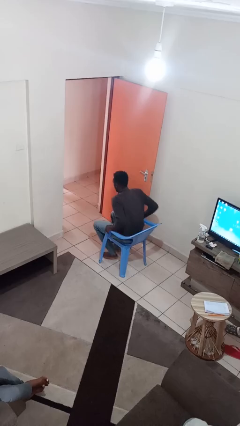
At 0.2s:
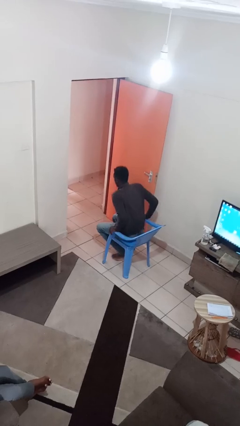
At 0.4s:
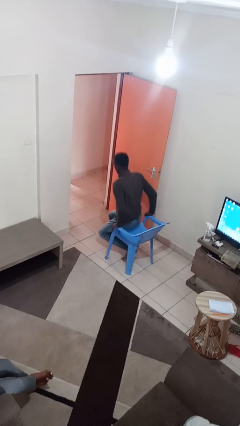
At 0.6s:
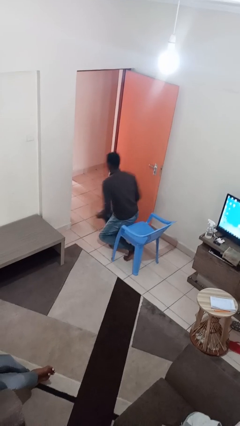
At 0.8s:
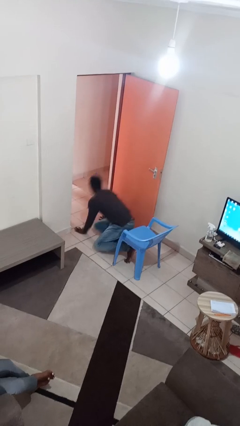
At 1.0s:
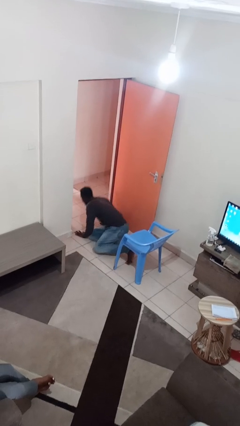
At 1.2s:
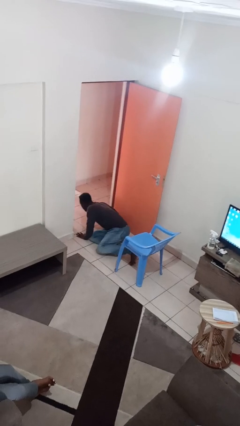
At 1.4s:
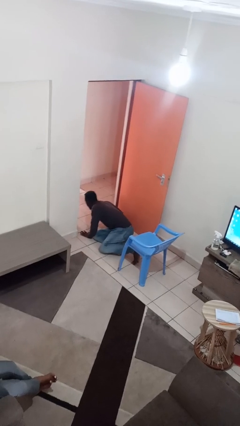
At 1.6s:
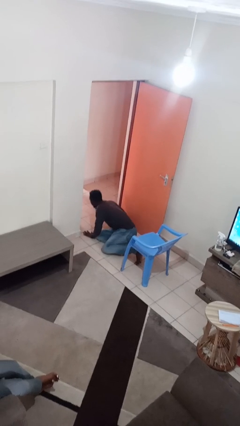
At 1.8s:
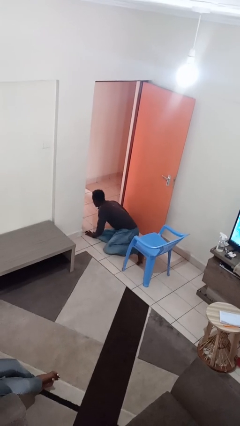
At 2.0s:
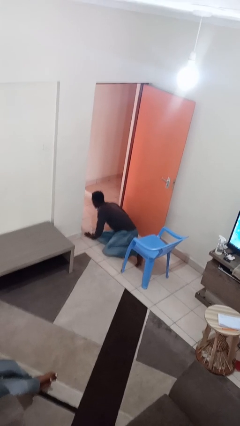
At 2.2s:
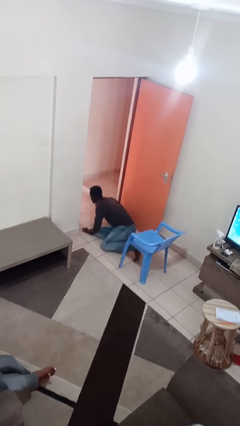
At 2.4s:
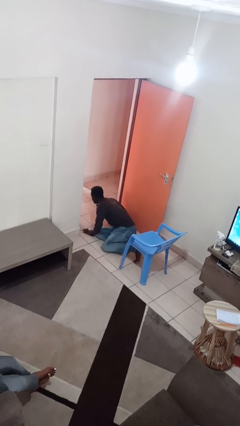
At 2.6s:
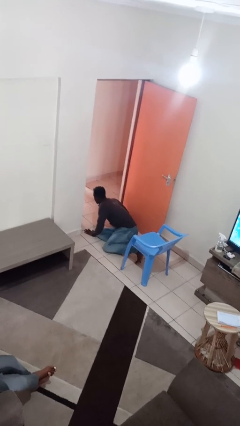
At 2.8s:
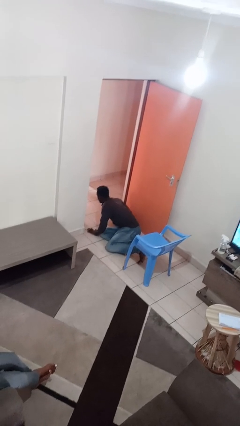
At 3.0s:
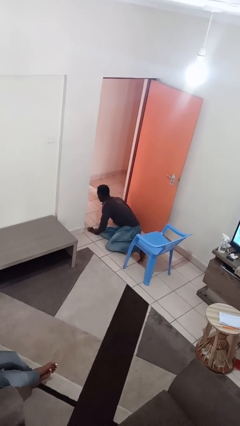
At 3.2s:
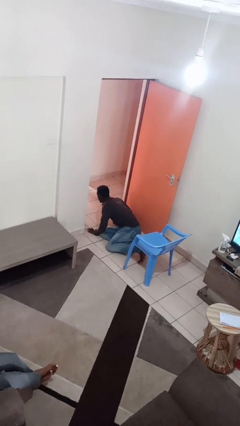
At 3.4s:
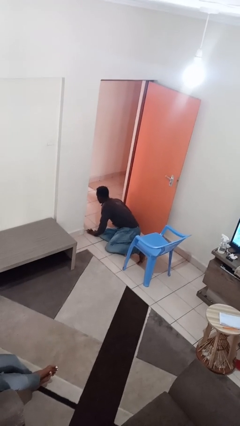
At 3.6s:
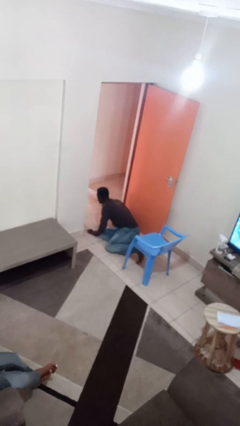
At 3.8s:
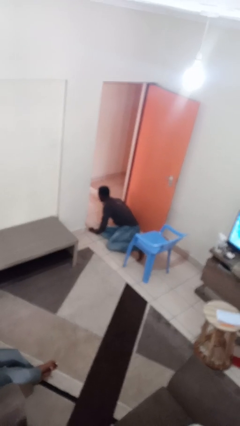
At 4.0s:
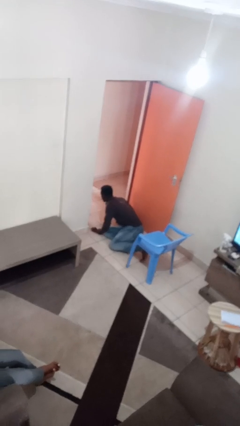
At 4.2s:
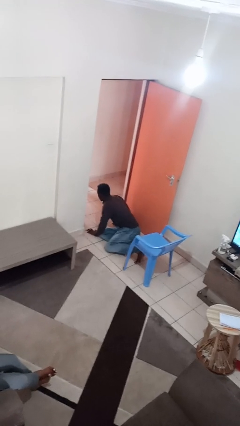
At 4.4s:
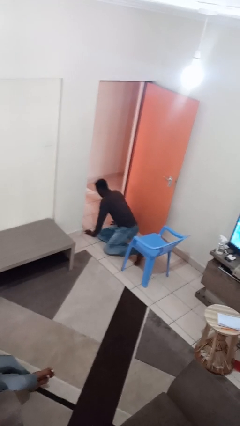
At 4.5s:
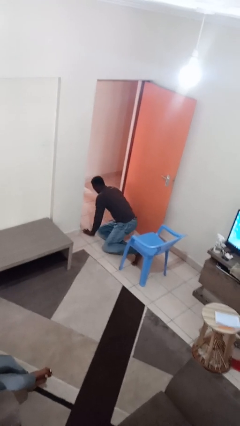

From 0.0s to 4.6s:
person falls from chair

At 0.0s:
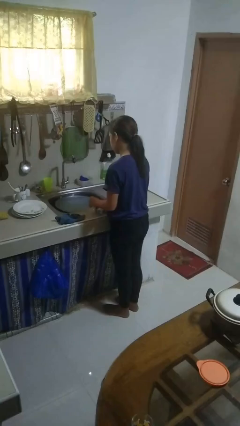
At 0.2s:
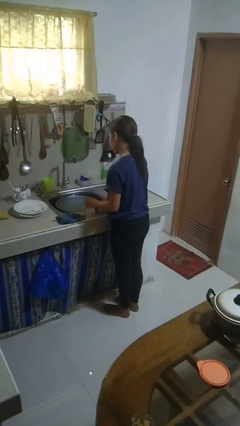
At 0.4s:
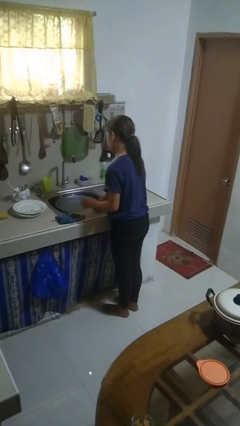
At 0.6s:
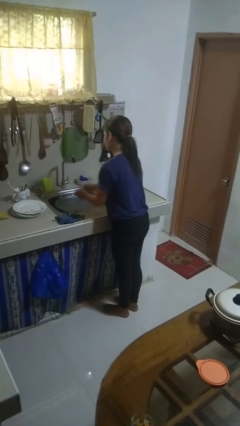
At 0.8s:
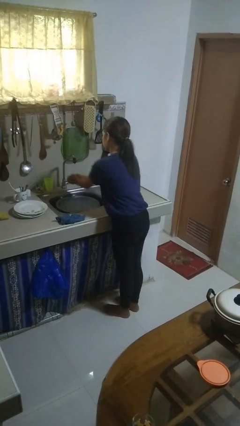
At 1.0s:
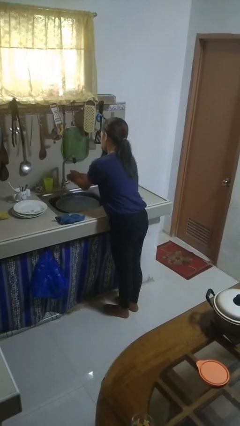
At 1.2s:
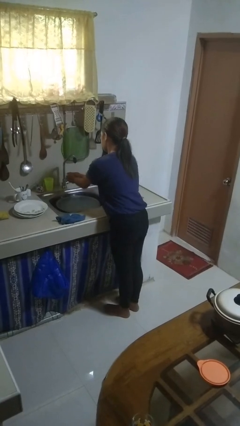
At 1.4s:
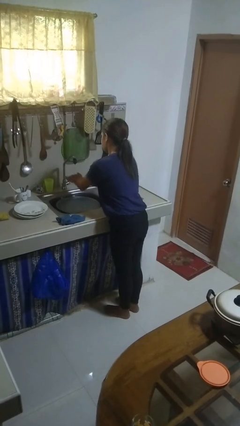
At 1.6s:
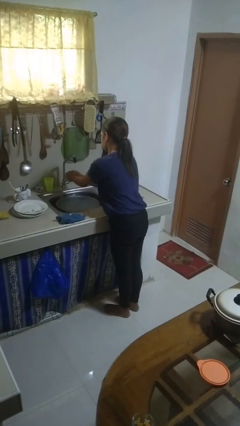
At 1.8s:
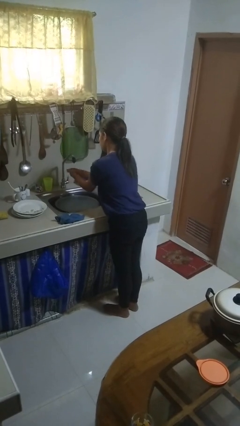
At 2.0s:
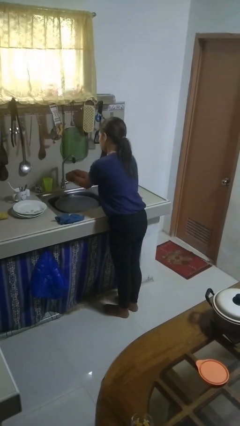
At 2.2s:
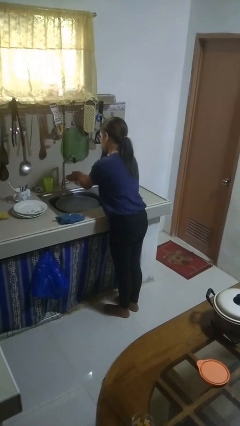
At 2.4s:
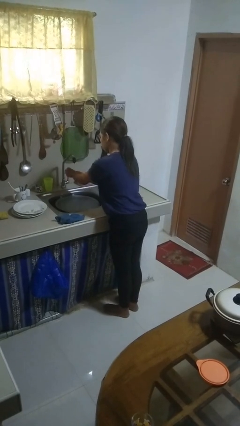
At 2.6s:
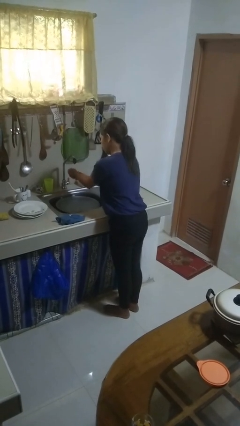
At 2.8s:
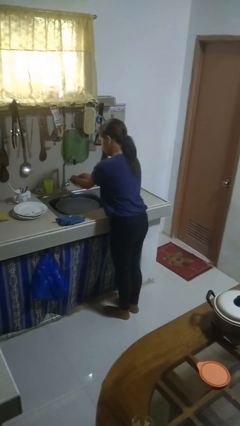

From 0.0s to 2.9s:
person washes hands

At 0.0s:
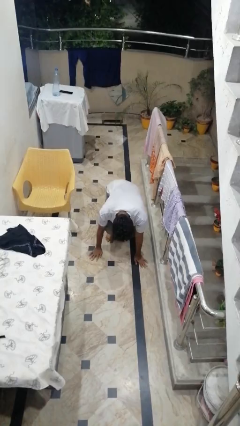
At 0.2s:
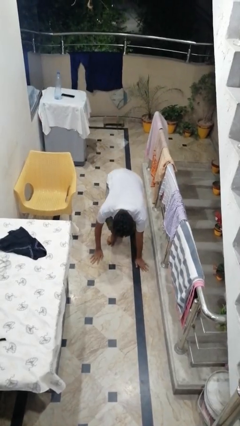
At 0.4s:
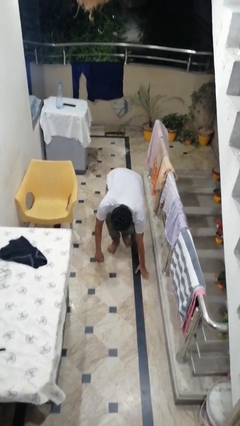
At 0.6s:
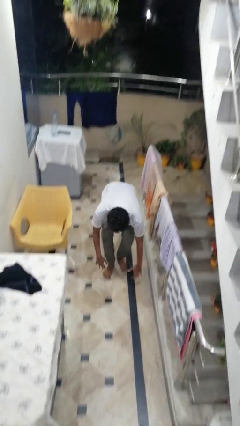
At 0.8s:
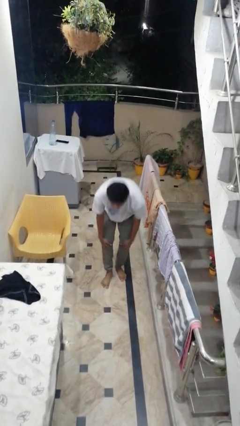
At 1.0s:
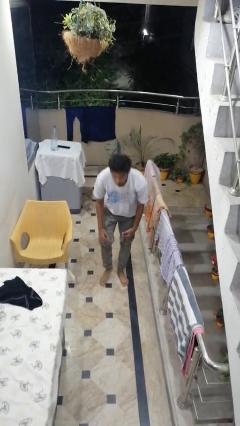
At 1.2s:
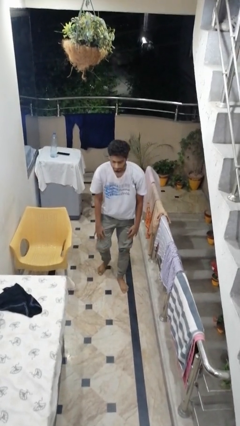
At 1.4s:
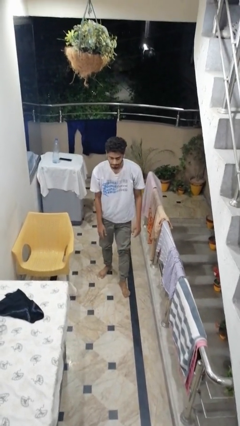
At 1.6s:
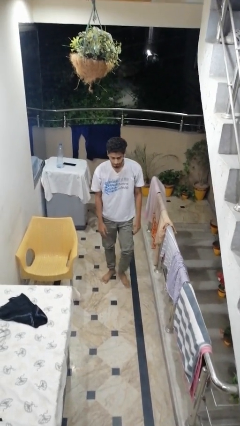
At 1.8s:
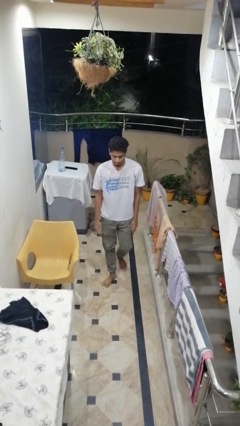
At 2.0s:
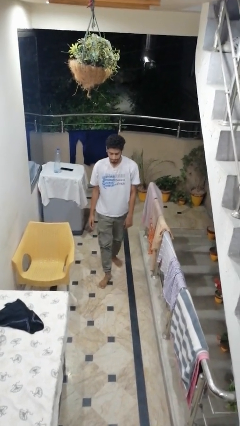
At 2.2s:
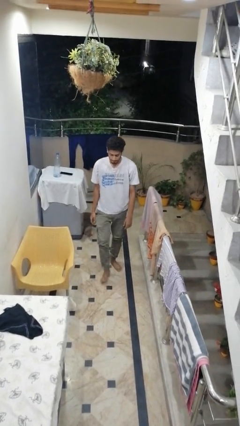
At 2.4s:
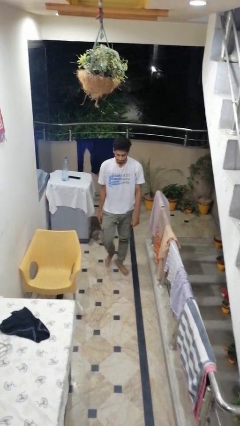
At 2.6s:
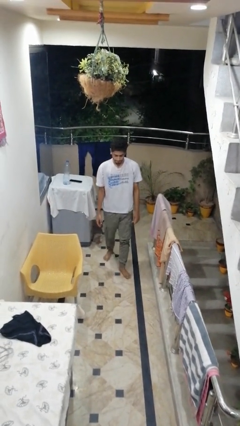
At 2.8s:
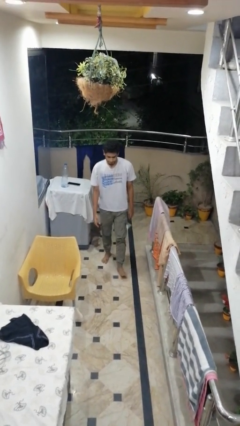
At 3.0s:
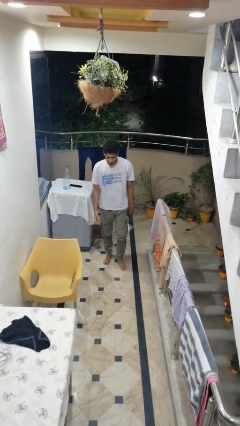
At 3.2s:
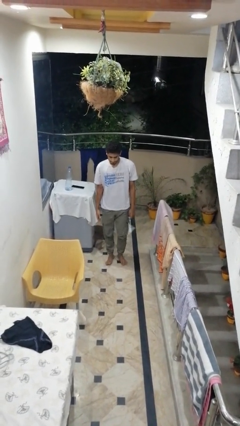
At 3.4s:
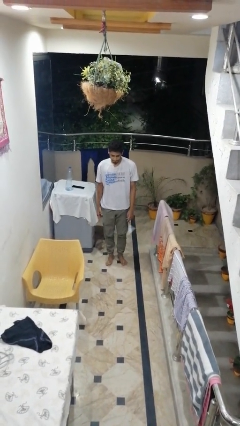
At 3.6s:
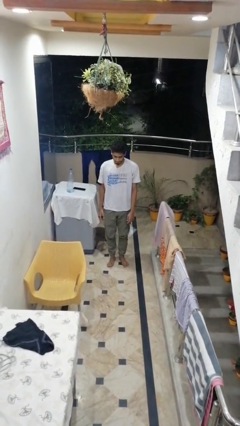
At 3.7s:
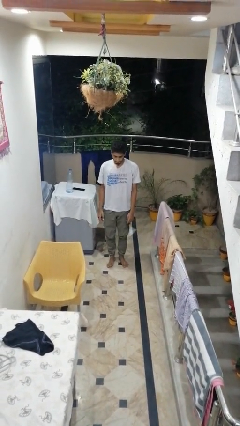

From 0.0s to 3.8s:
person stands up from floor

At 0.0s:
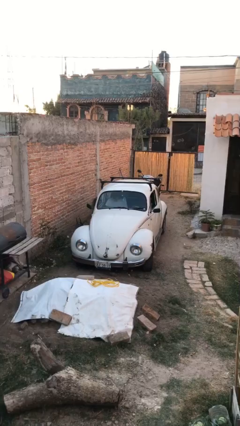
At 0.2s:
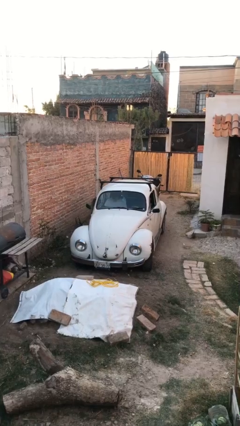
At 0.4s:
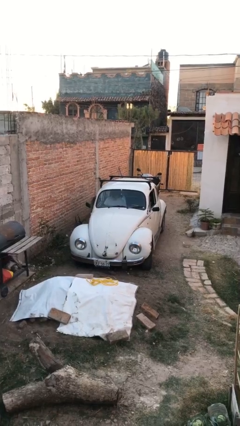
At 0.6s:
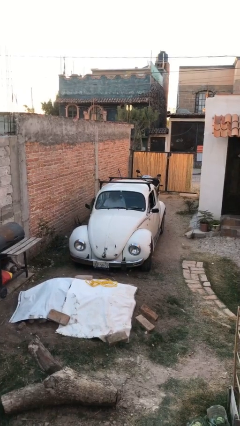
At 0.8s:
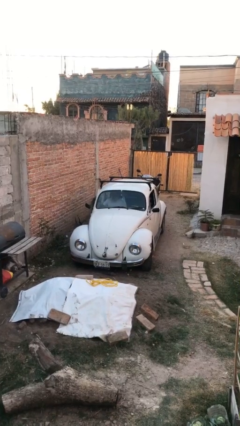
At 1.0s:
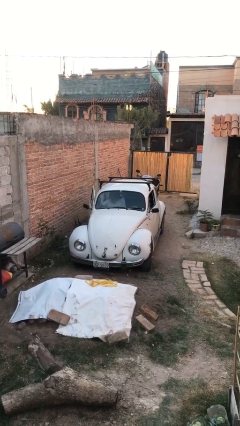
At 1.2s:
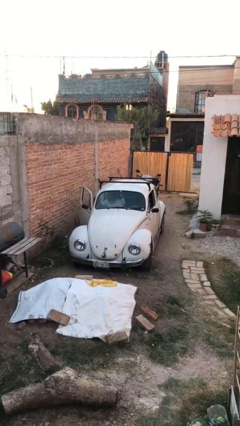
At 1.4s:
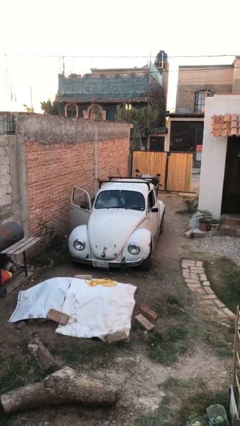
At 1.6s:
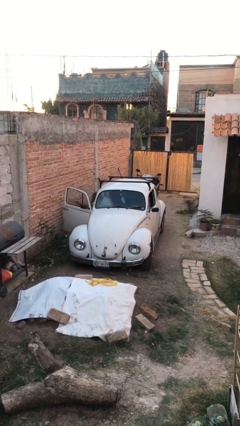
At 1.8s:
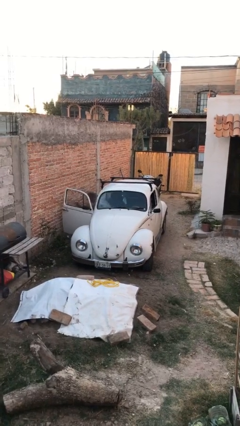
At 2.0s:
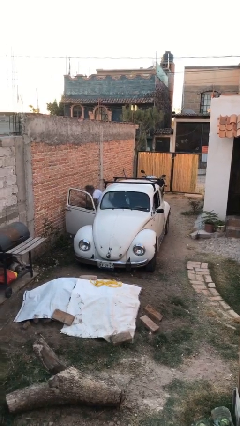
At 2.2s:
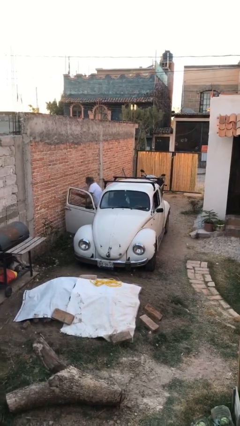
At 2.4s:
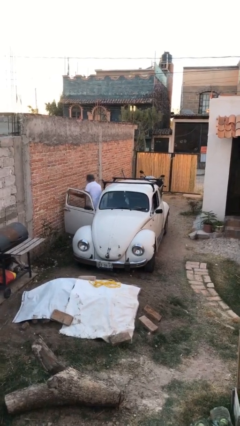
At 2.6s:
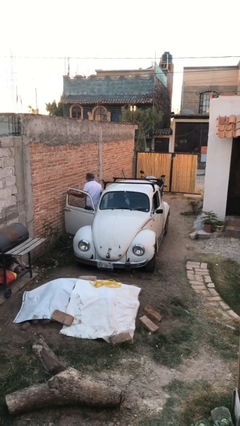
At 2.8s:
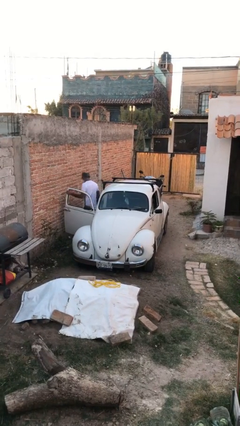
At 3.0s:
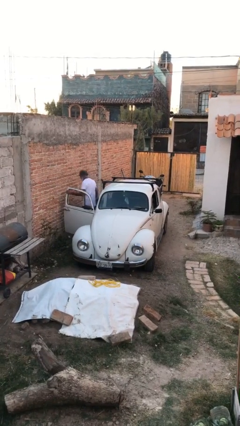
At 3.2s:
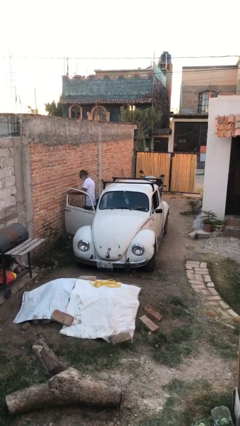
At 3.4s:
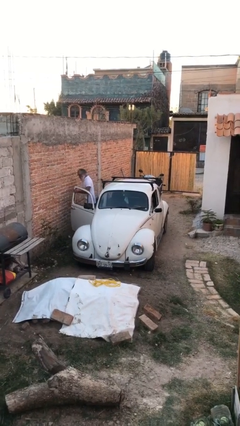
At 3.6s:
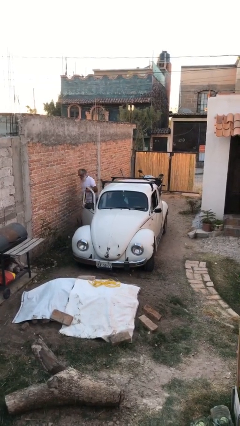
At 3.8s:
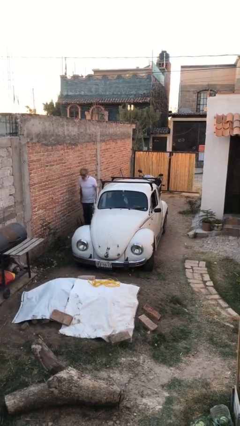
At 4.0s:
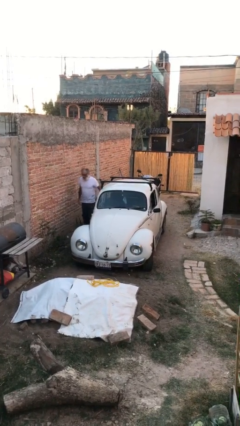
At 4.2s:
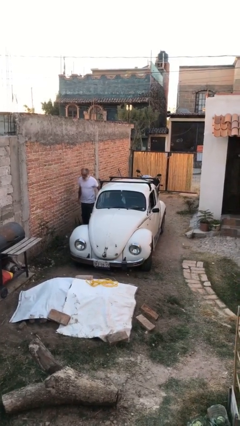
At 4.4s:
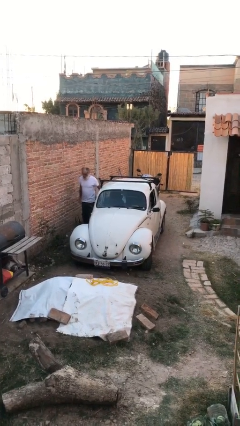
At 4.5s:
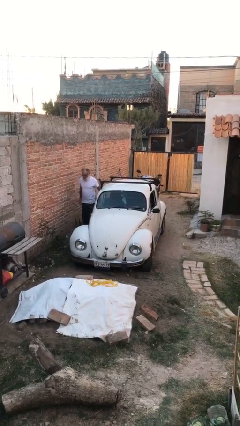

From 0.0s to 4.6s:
car drops off person

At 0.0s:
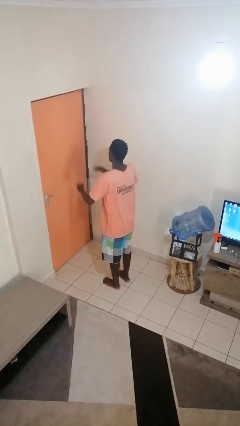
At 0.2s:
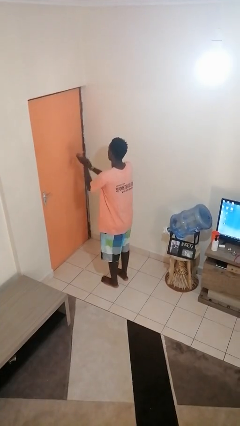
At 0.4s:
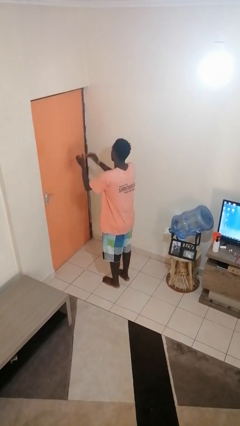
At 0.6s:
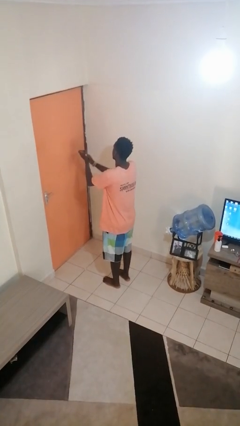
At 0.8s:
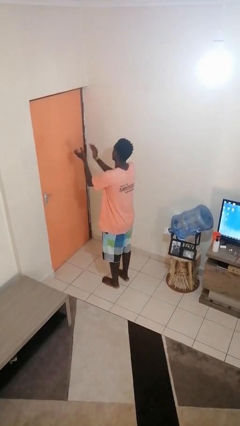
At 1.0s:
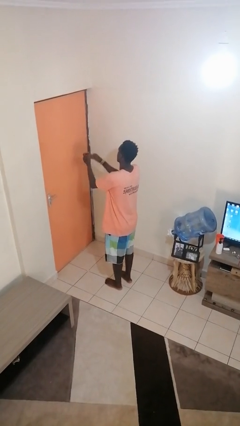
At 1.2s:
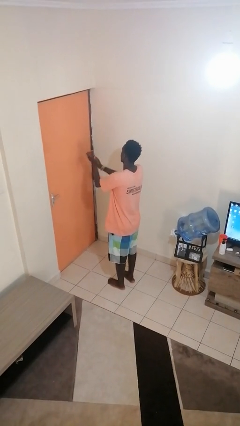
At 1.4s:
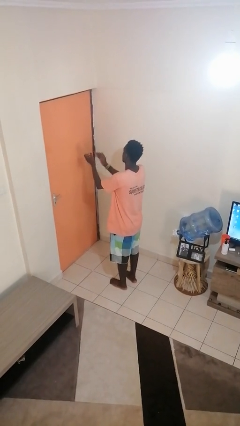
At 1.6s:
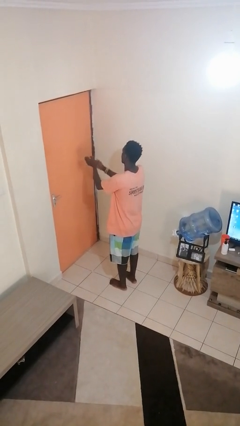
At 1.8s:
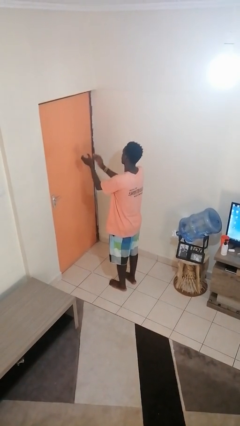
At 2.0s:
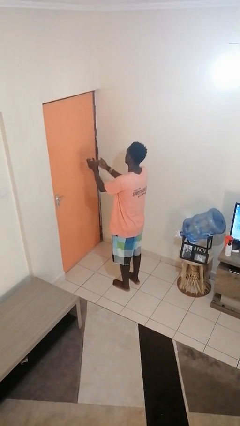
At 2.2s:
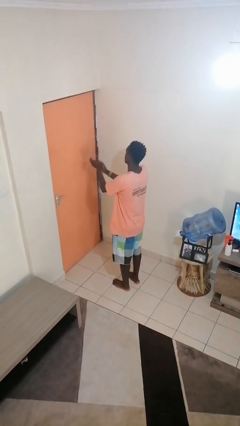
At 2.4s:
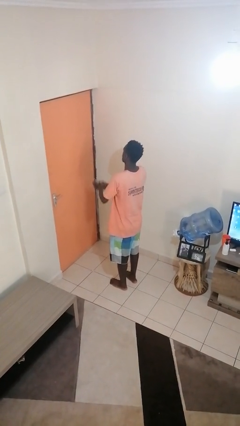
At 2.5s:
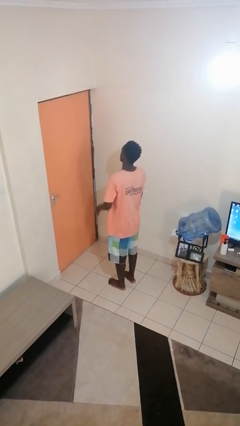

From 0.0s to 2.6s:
person claps hands
